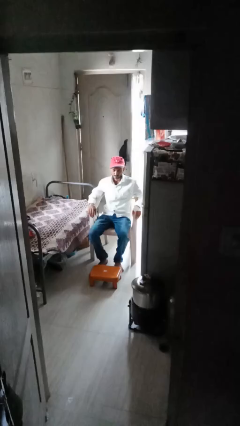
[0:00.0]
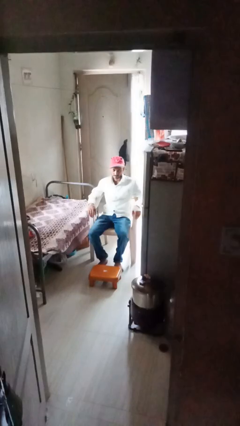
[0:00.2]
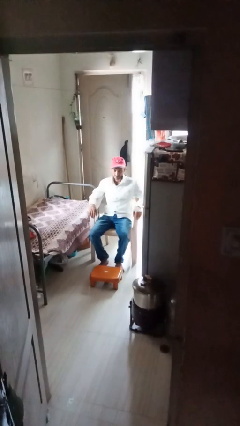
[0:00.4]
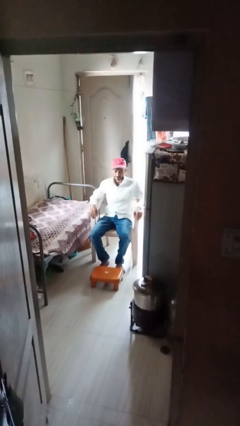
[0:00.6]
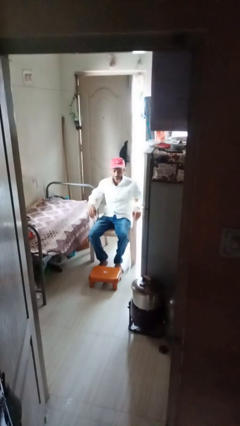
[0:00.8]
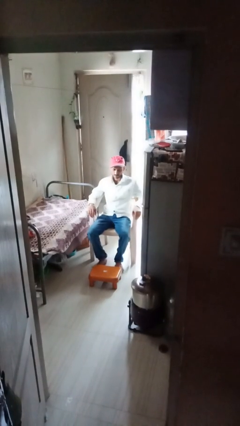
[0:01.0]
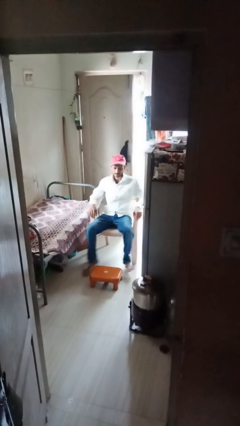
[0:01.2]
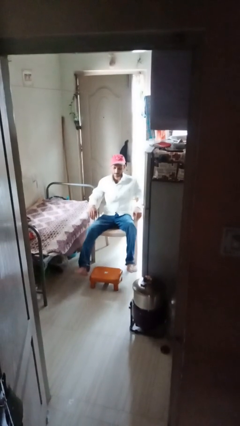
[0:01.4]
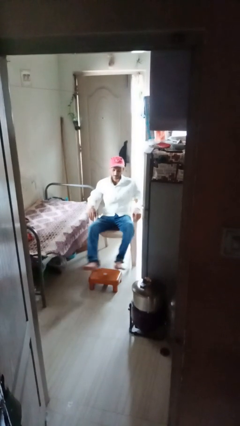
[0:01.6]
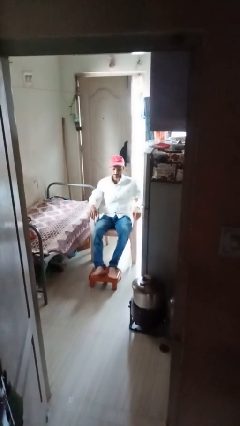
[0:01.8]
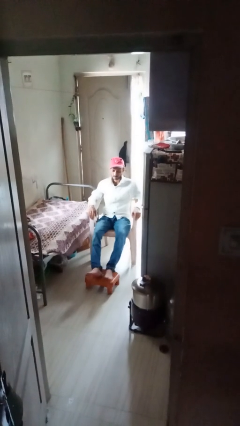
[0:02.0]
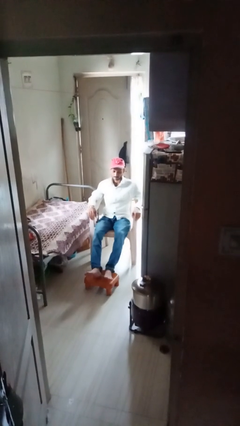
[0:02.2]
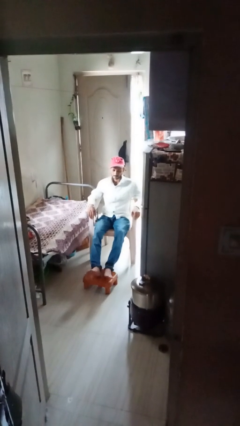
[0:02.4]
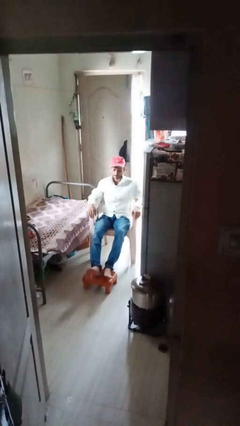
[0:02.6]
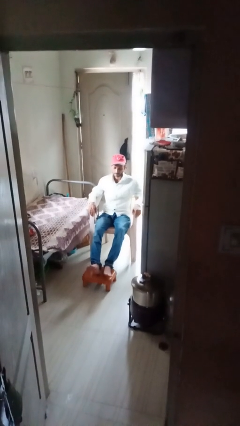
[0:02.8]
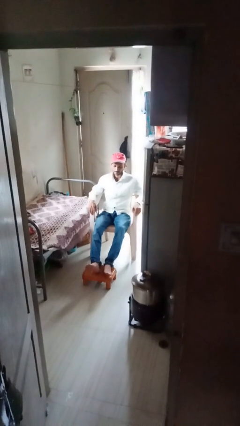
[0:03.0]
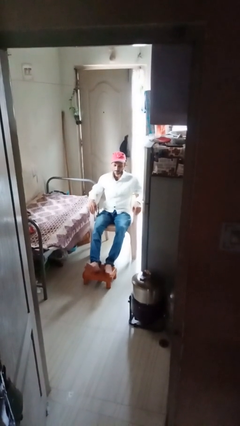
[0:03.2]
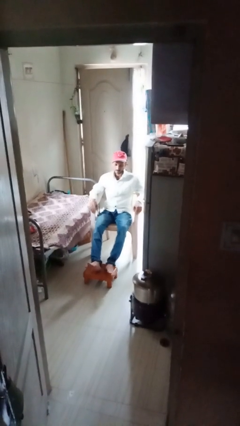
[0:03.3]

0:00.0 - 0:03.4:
person puts feet up

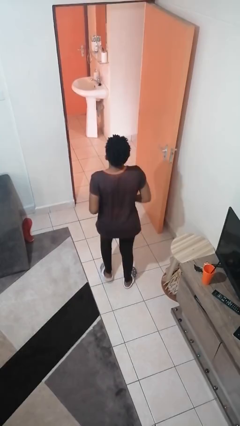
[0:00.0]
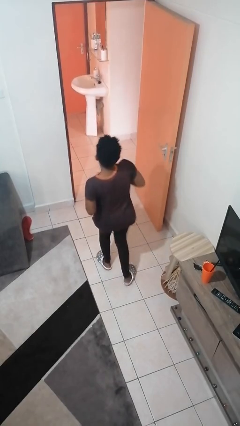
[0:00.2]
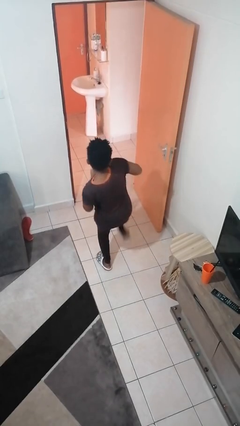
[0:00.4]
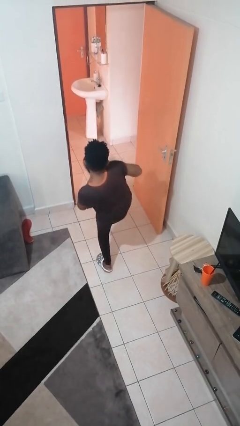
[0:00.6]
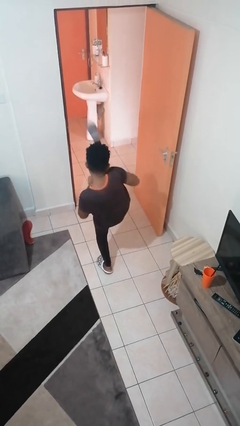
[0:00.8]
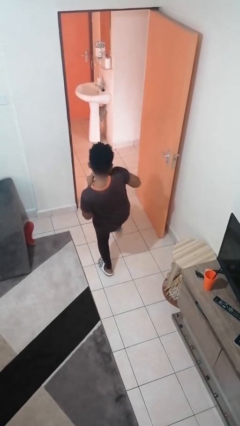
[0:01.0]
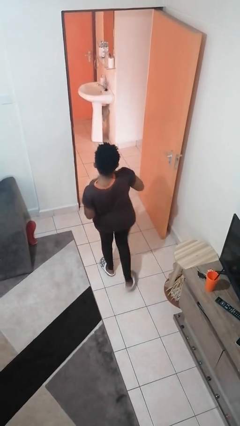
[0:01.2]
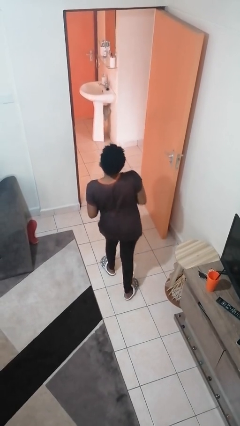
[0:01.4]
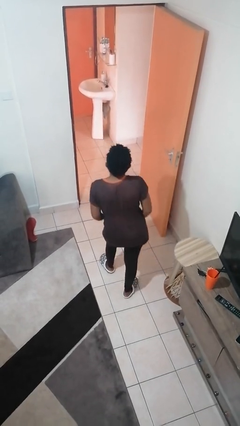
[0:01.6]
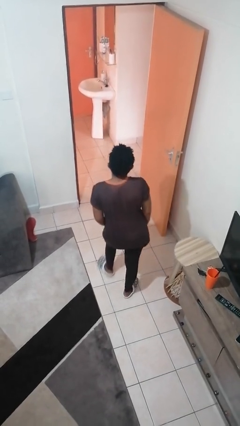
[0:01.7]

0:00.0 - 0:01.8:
person karate kicks

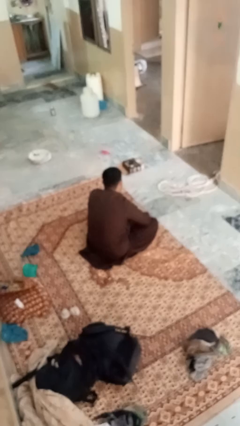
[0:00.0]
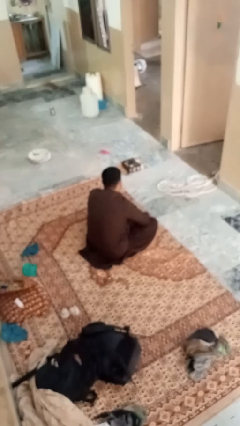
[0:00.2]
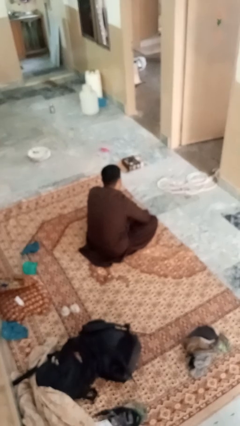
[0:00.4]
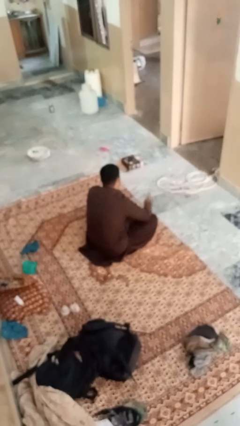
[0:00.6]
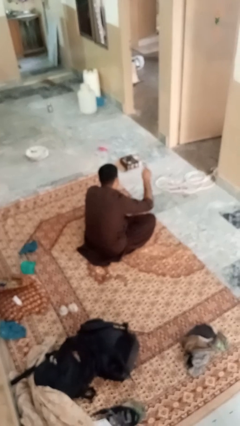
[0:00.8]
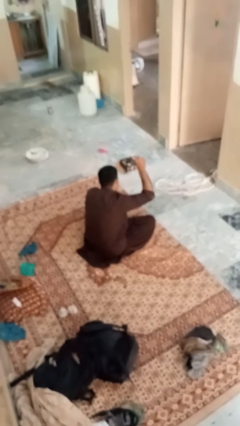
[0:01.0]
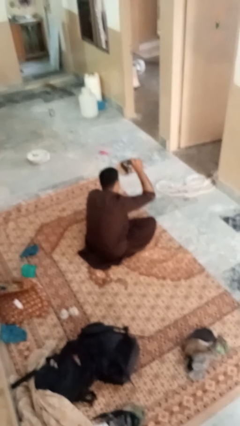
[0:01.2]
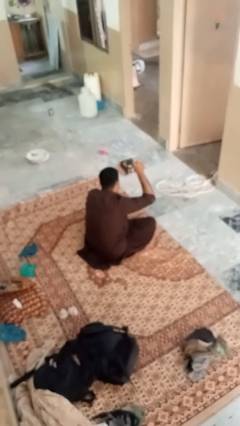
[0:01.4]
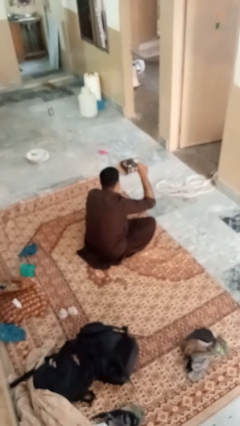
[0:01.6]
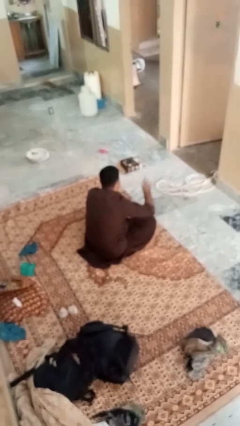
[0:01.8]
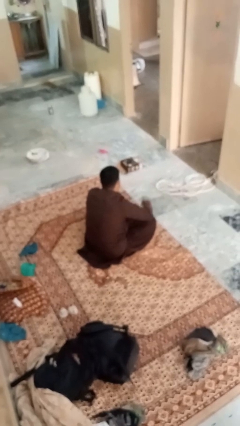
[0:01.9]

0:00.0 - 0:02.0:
person gestures number one

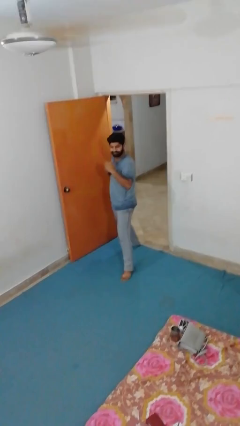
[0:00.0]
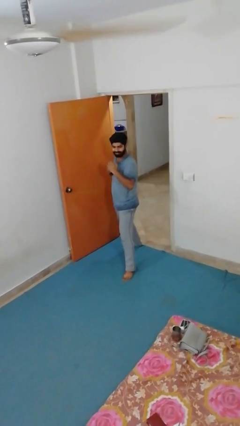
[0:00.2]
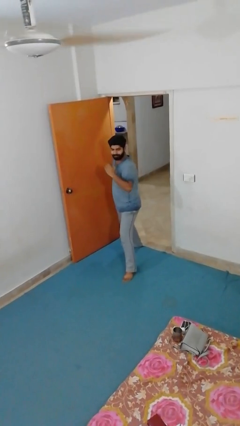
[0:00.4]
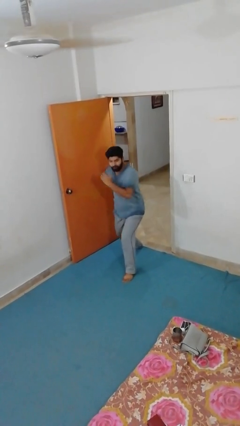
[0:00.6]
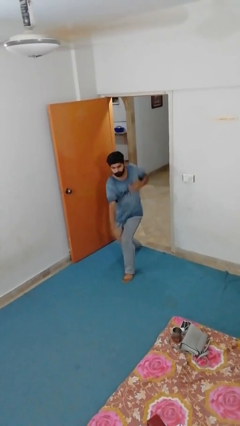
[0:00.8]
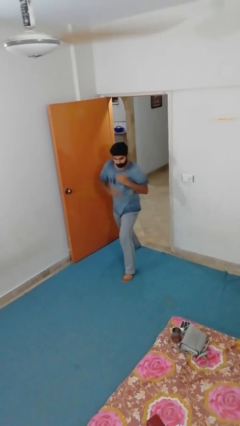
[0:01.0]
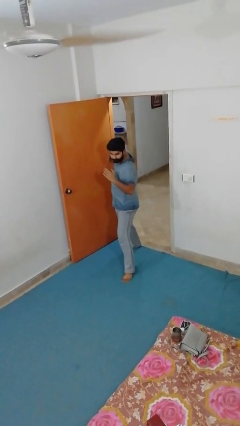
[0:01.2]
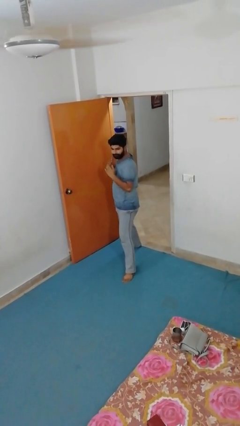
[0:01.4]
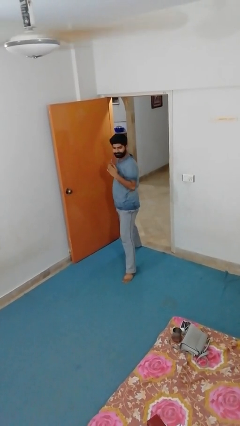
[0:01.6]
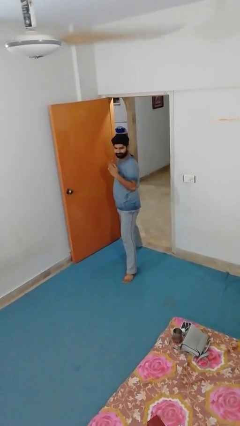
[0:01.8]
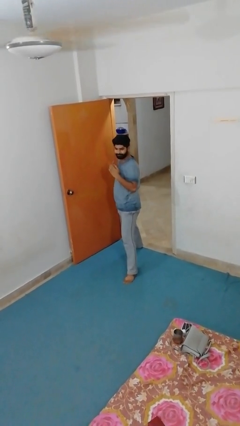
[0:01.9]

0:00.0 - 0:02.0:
person karate chop

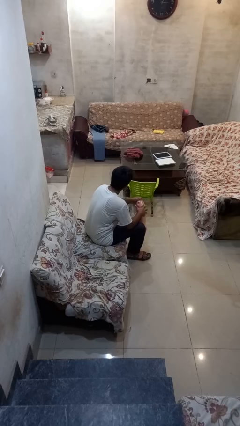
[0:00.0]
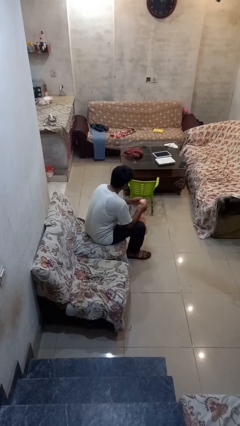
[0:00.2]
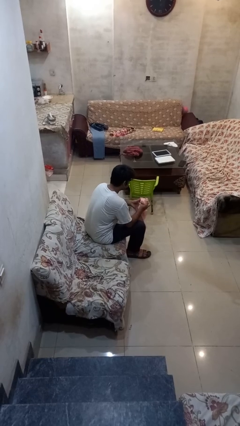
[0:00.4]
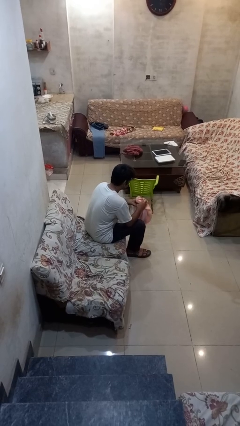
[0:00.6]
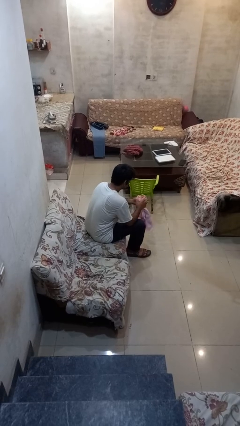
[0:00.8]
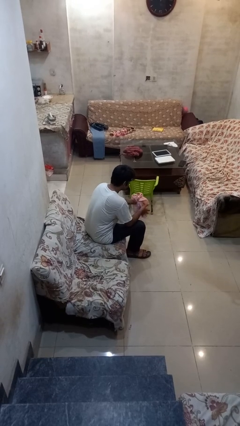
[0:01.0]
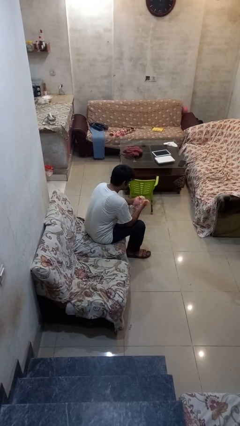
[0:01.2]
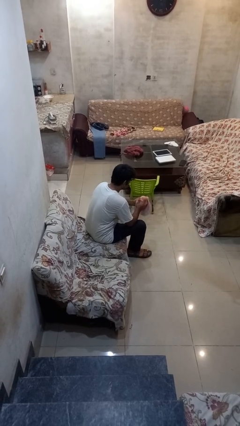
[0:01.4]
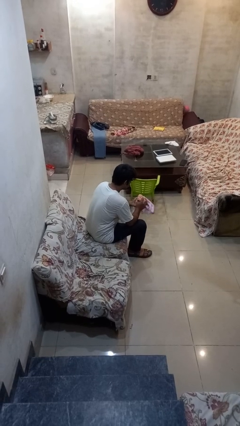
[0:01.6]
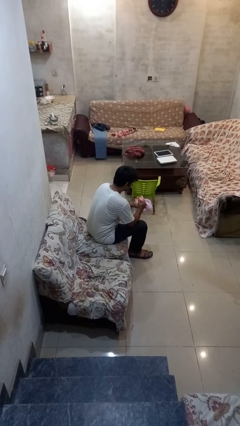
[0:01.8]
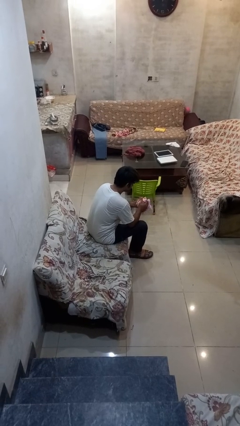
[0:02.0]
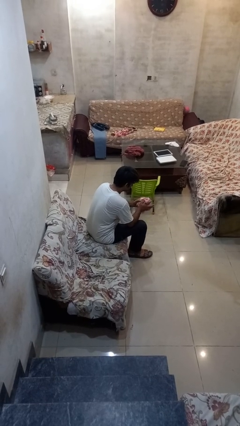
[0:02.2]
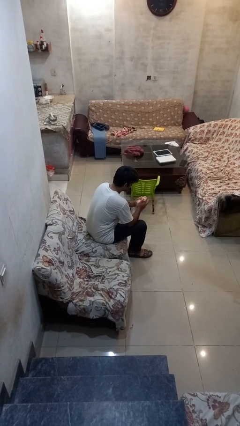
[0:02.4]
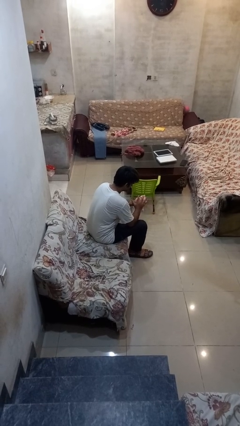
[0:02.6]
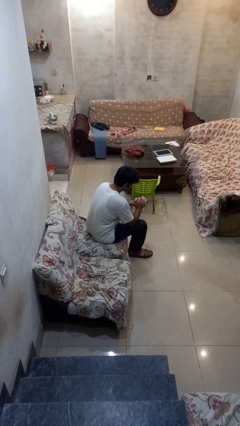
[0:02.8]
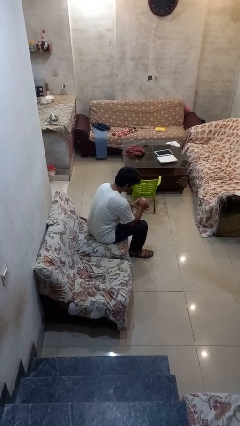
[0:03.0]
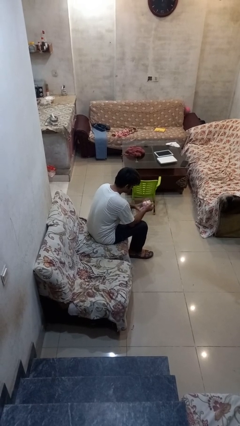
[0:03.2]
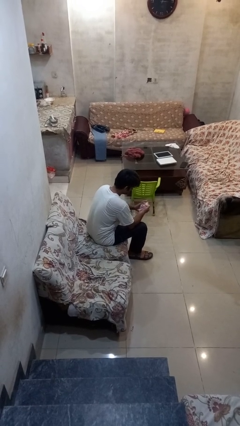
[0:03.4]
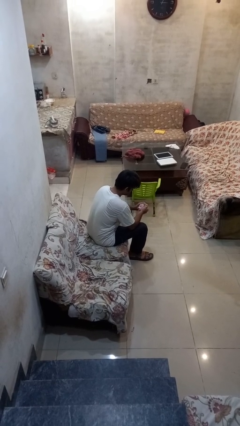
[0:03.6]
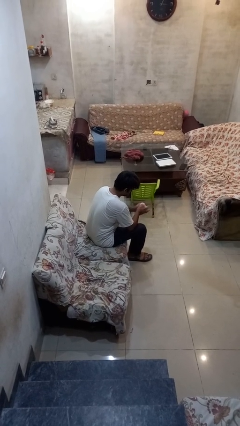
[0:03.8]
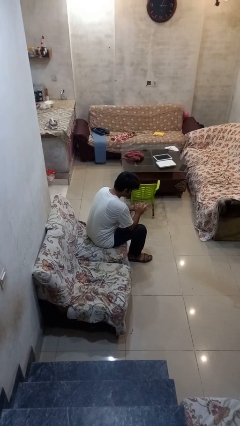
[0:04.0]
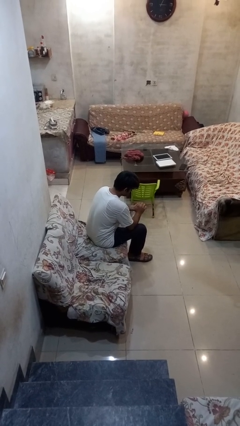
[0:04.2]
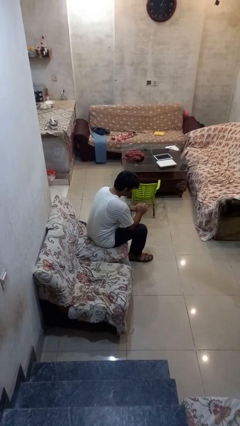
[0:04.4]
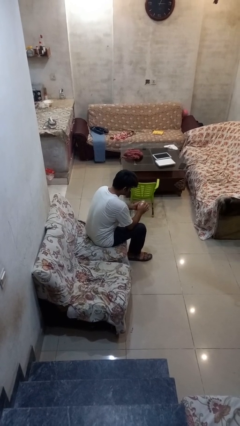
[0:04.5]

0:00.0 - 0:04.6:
person squeezes object

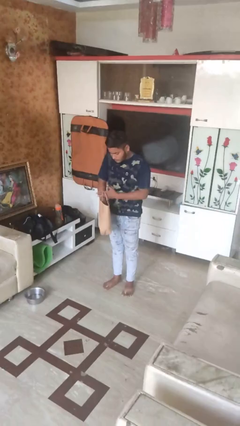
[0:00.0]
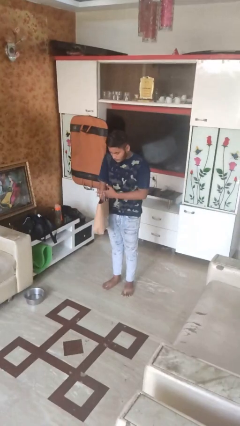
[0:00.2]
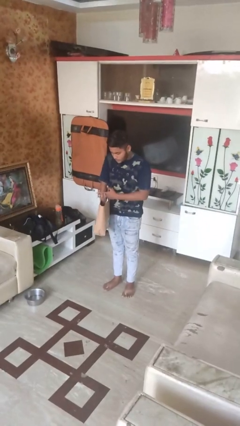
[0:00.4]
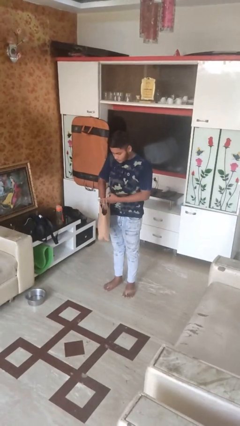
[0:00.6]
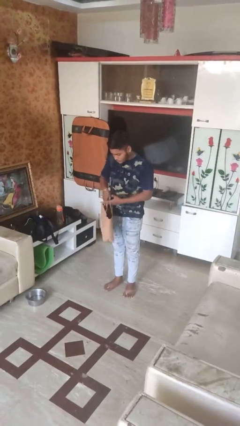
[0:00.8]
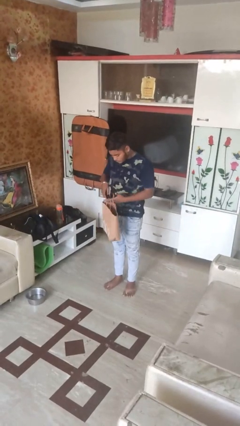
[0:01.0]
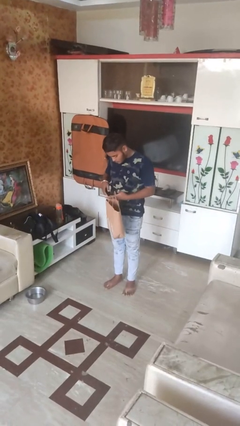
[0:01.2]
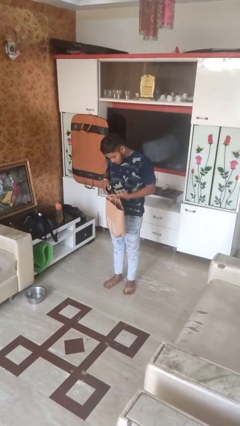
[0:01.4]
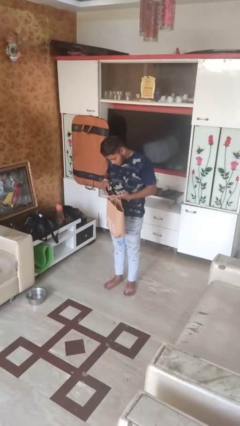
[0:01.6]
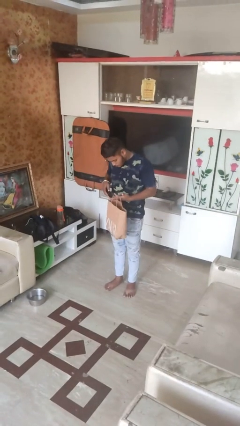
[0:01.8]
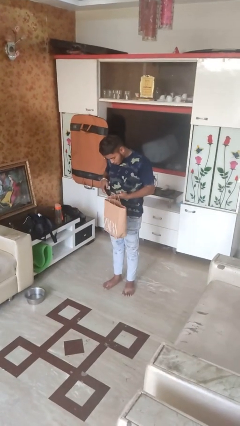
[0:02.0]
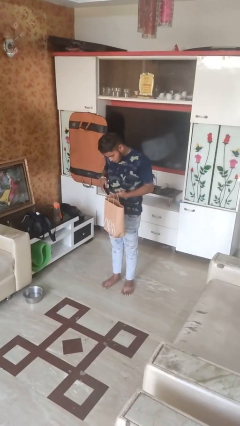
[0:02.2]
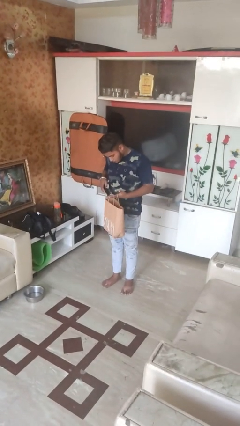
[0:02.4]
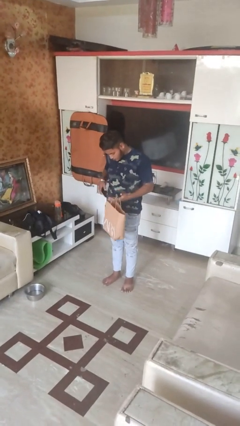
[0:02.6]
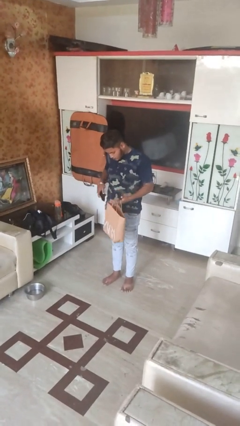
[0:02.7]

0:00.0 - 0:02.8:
person takes object from bag

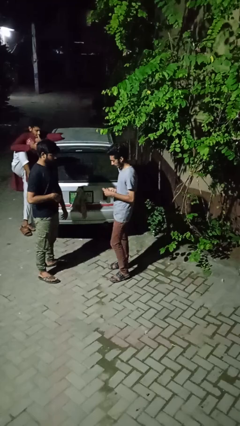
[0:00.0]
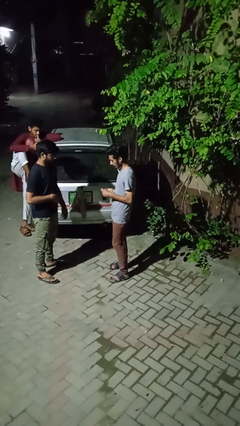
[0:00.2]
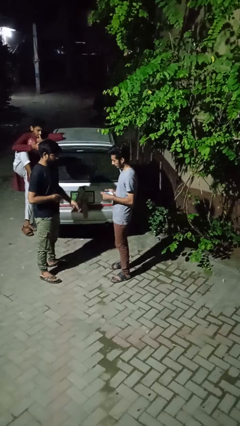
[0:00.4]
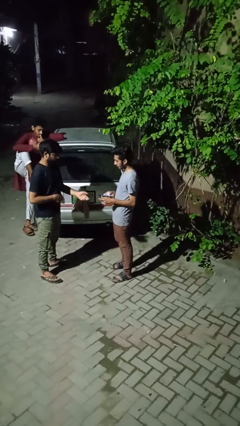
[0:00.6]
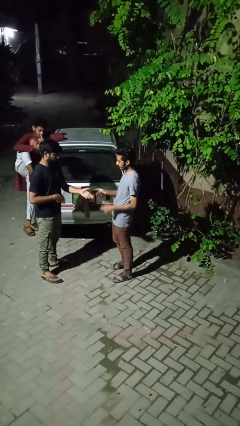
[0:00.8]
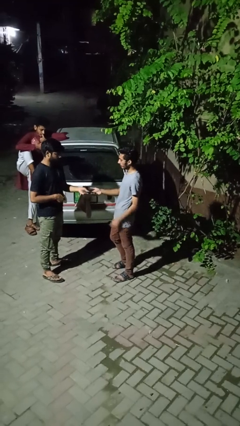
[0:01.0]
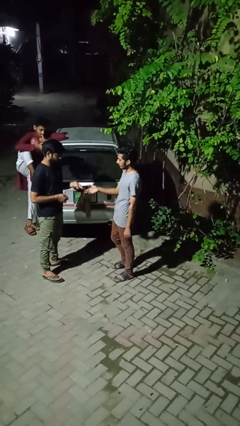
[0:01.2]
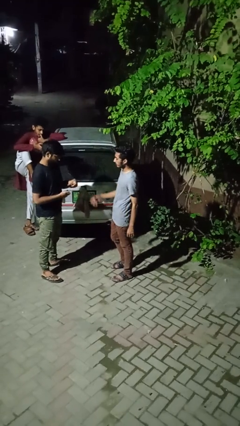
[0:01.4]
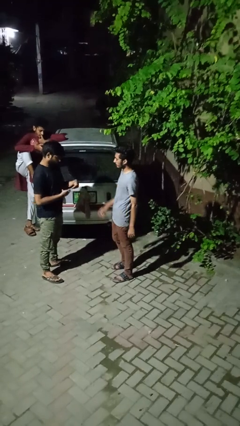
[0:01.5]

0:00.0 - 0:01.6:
person transfers object to person
